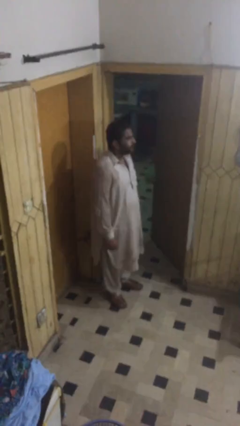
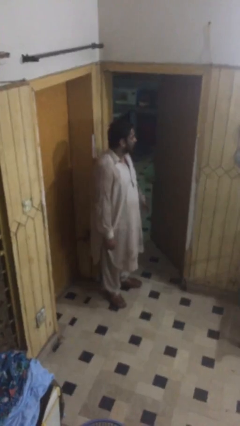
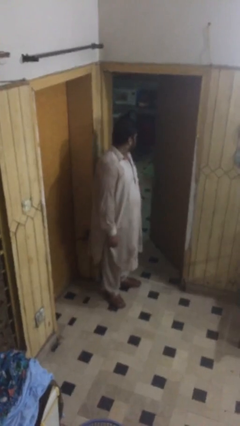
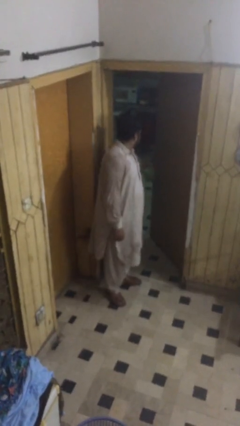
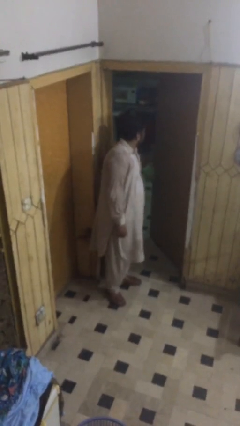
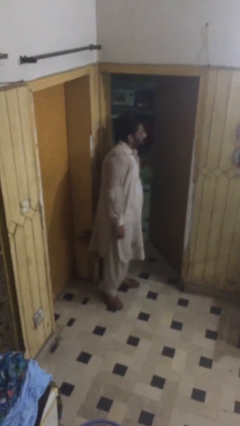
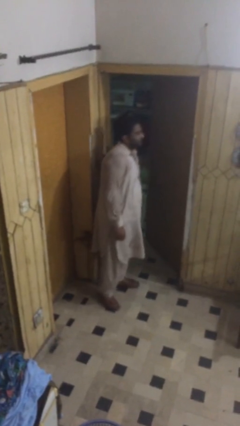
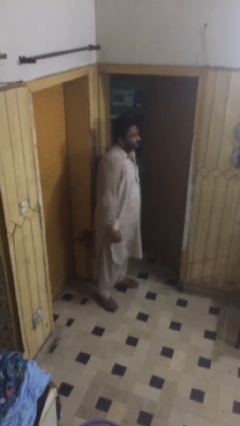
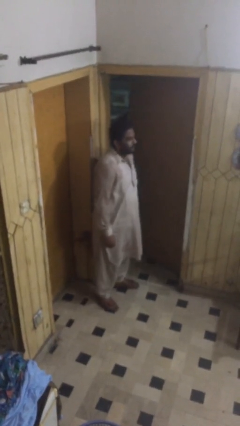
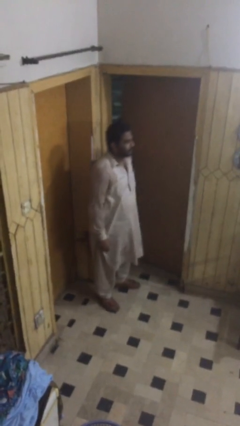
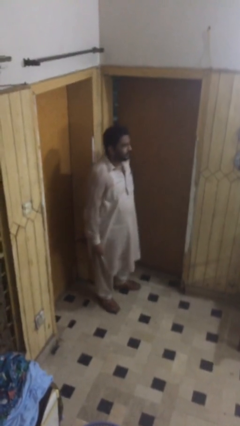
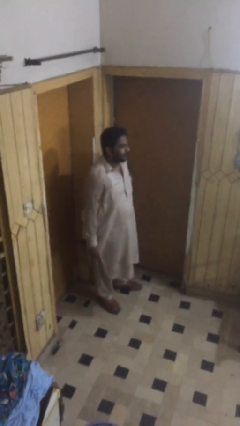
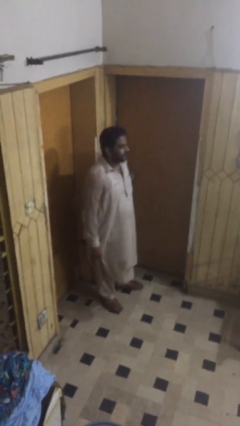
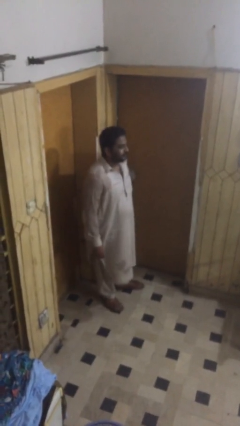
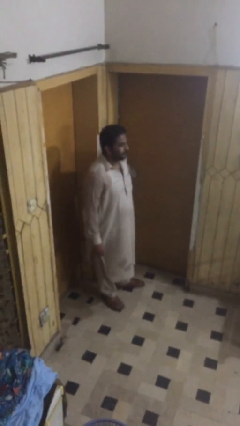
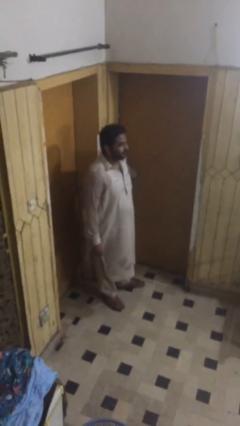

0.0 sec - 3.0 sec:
person closes facility door

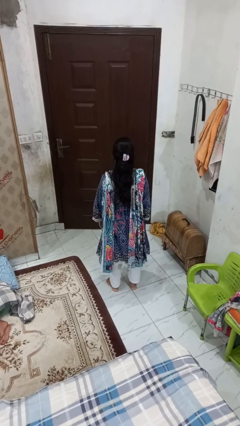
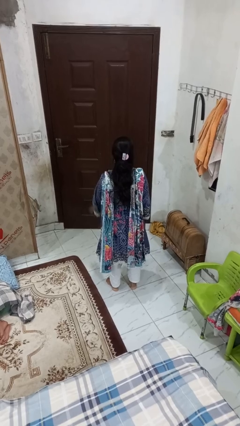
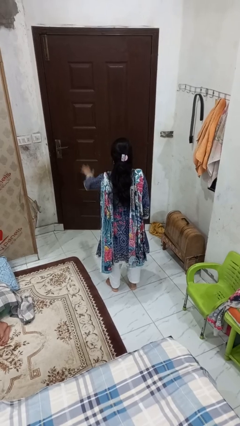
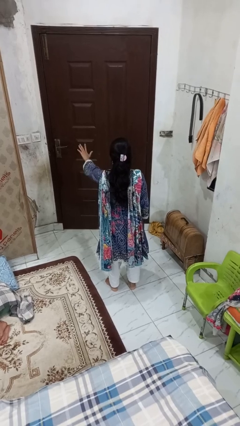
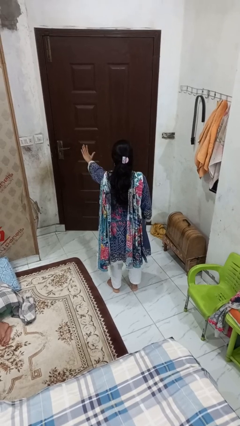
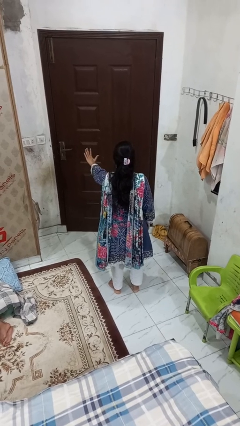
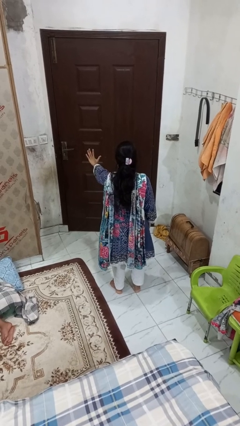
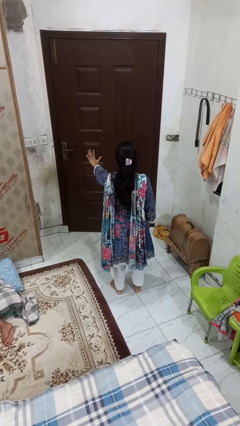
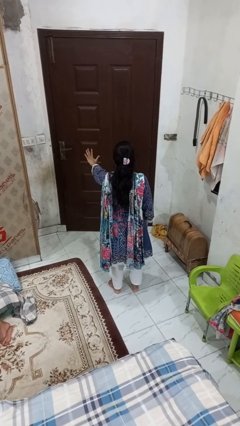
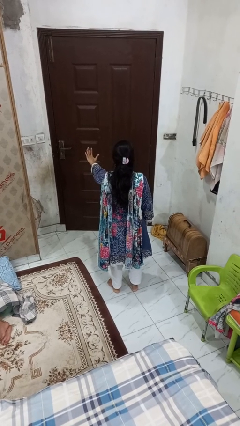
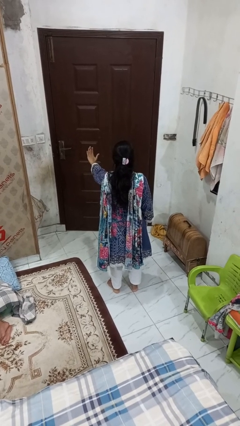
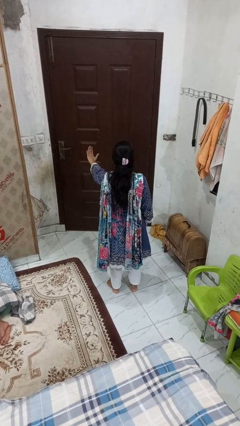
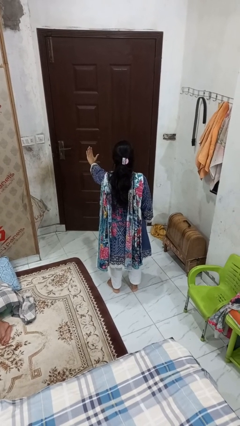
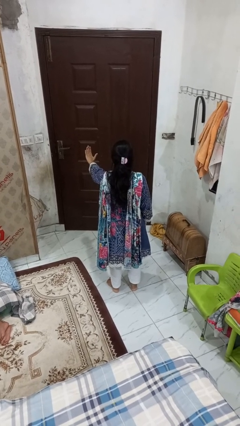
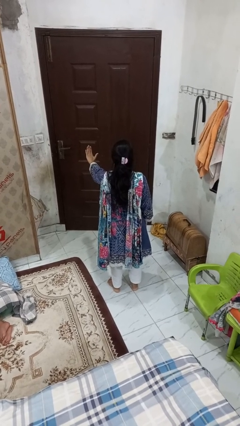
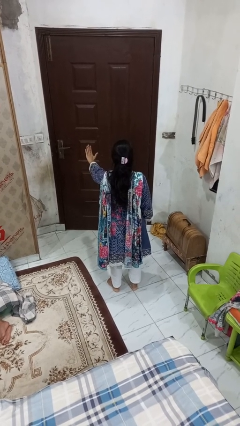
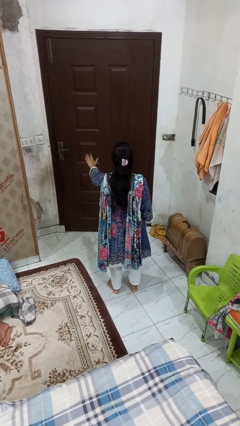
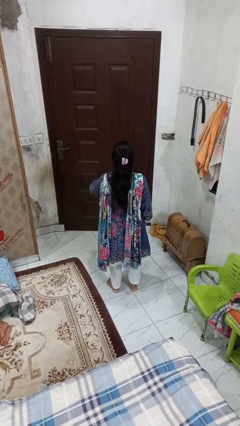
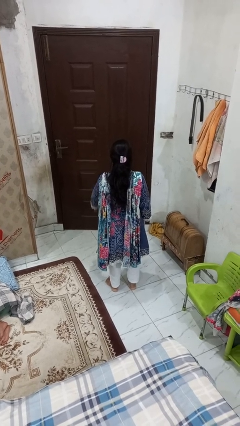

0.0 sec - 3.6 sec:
person gestures stop

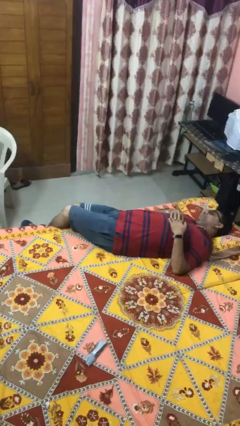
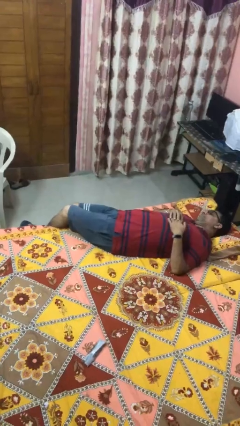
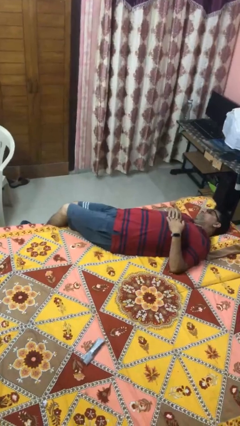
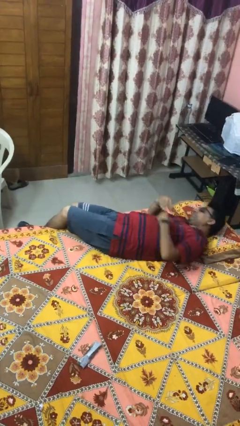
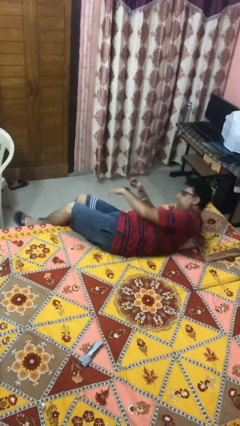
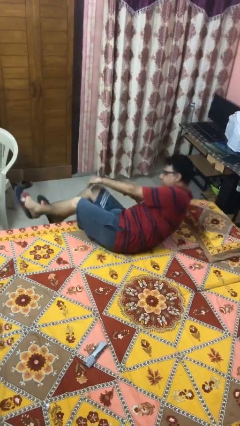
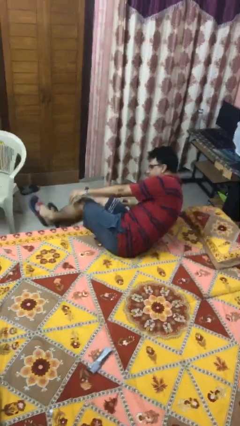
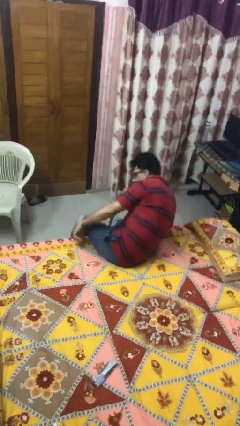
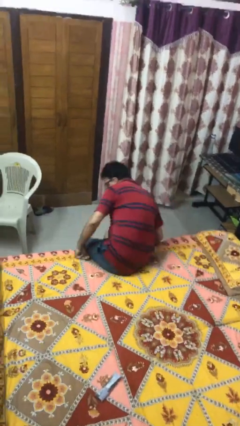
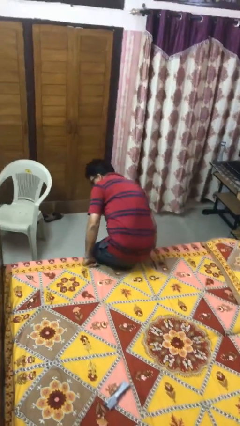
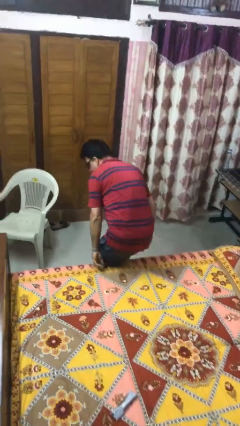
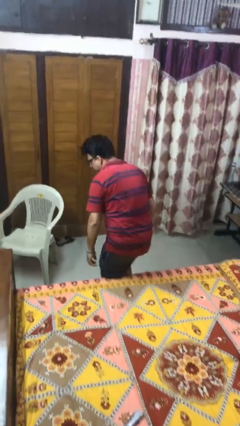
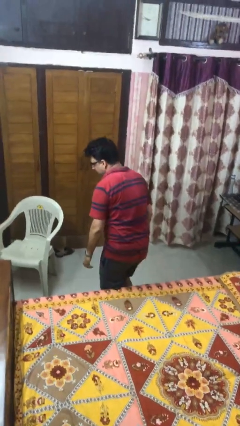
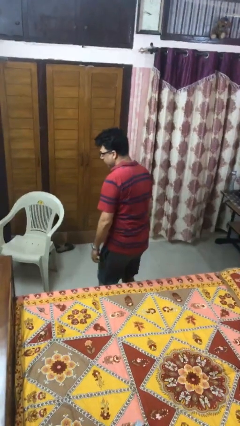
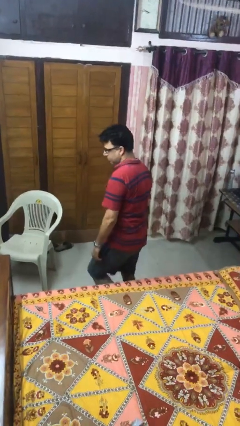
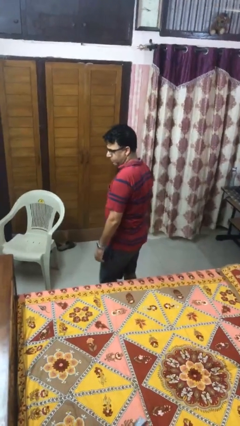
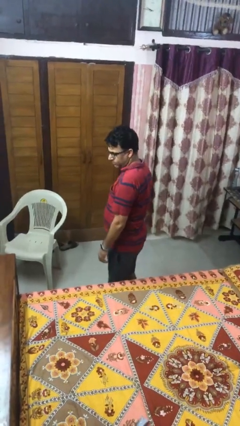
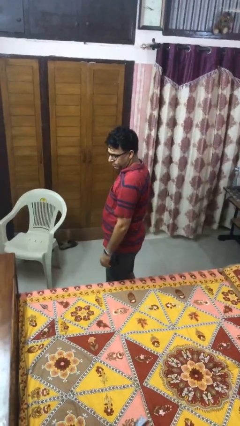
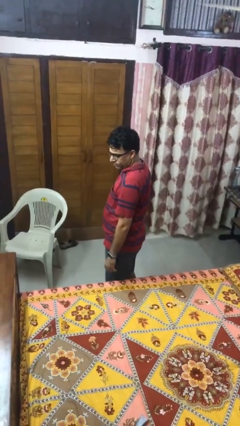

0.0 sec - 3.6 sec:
person stands up

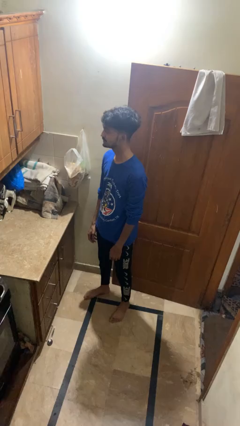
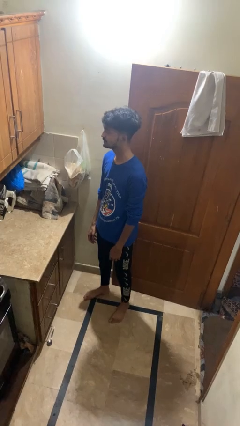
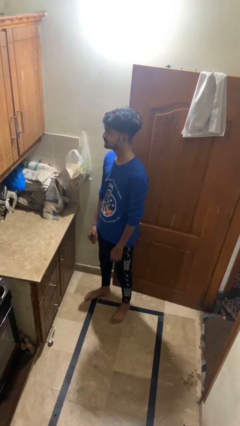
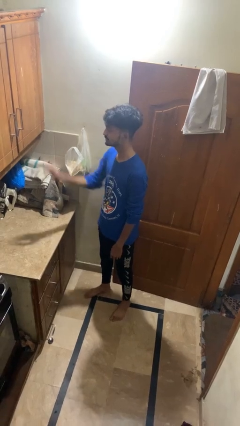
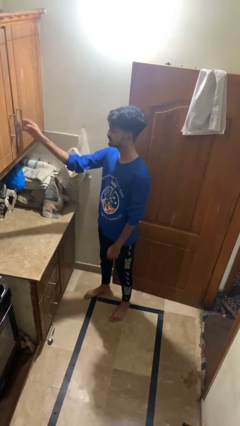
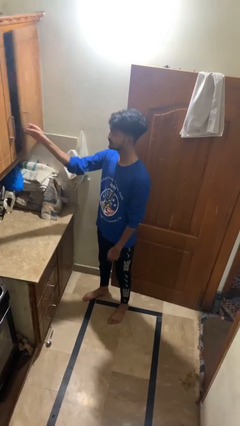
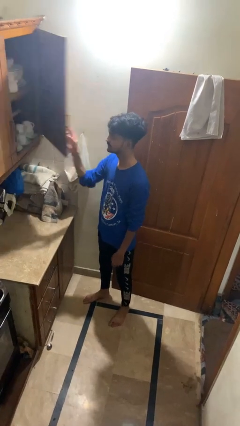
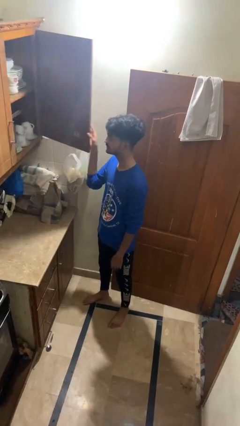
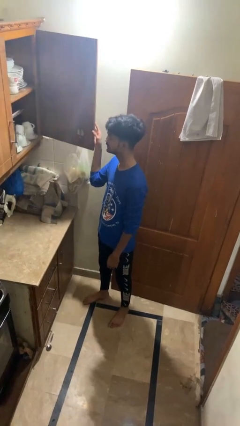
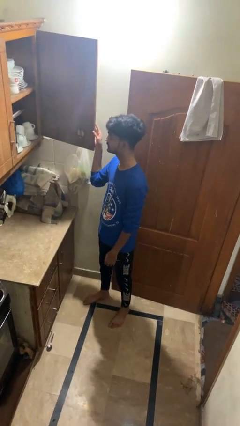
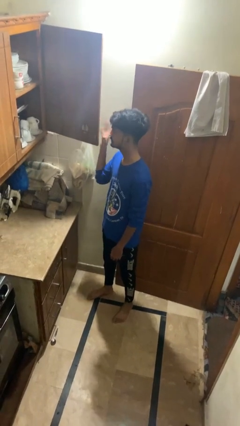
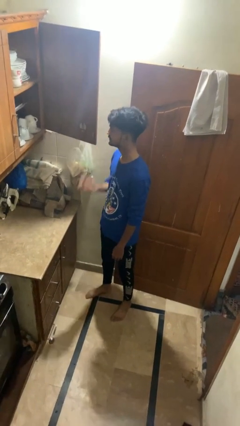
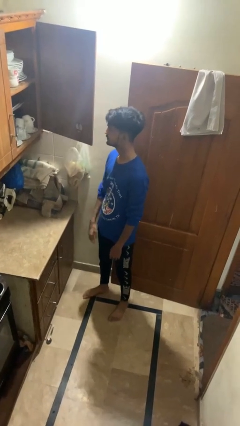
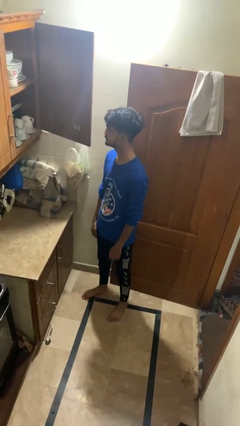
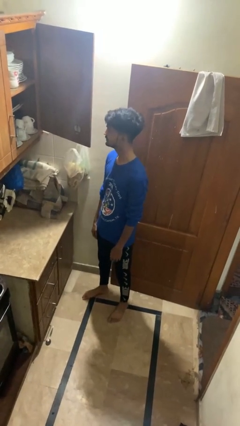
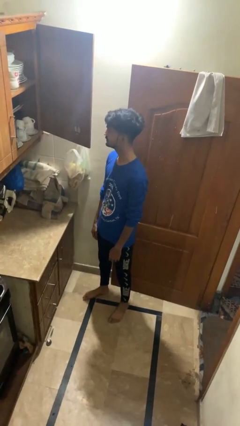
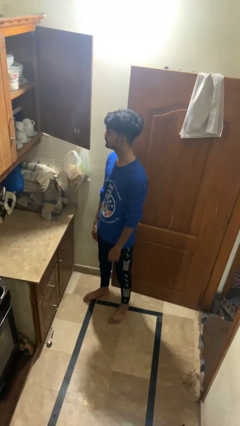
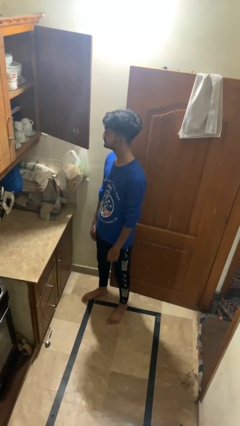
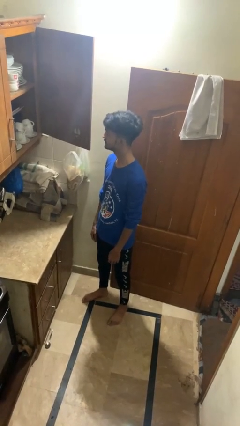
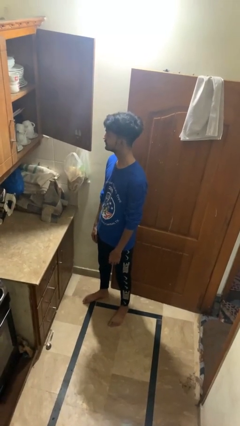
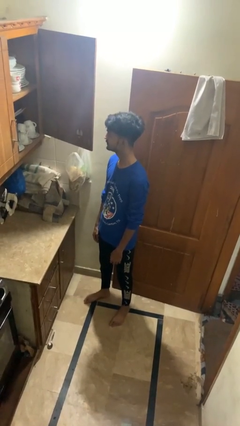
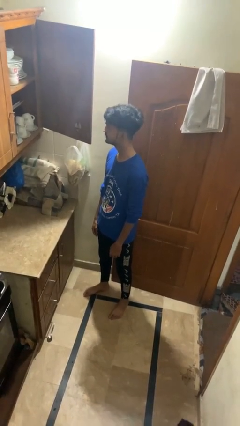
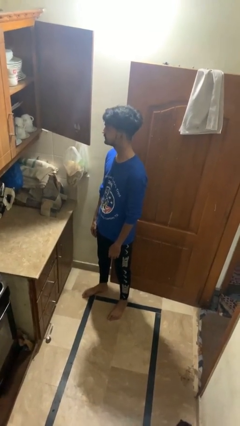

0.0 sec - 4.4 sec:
person opens cabinet

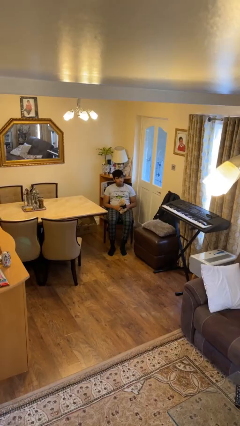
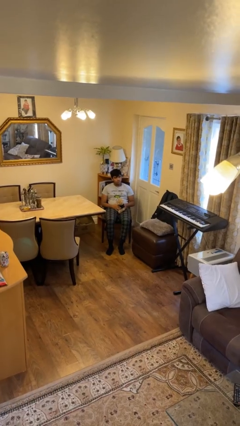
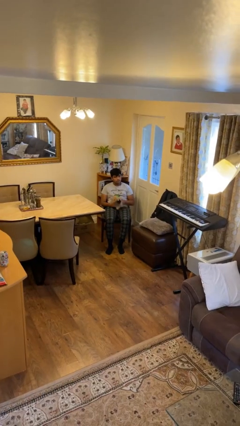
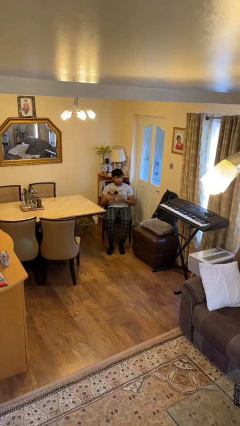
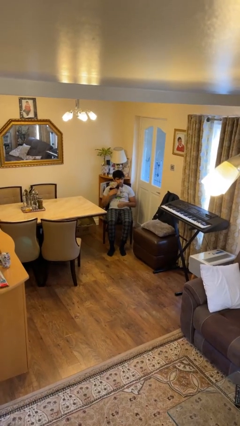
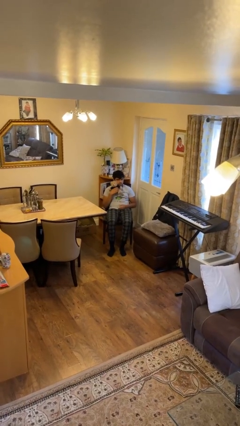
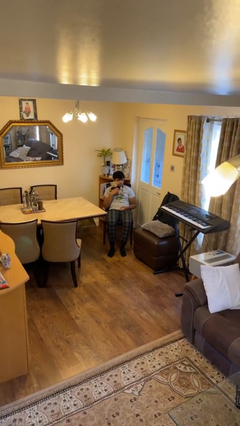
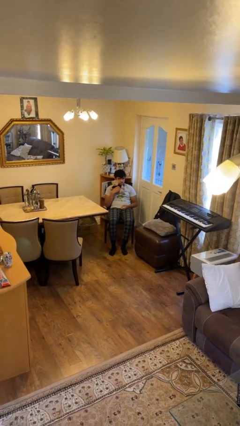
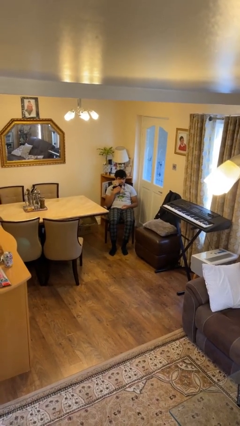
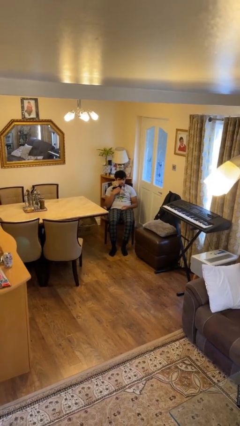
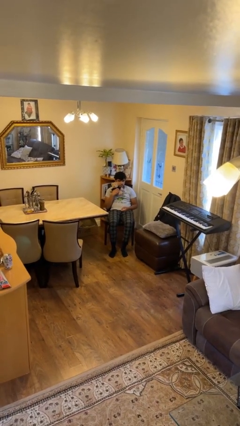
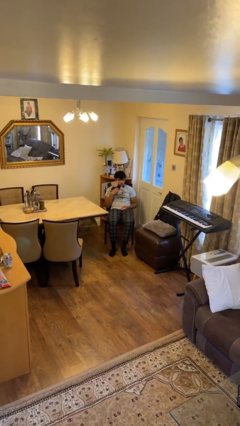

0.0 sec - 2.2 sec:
person hugs stuffed animal

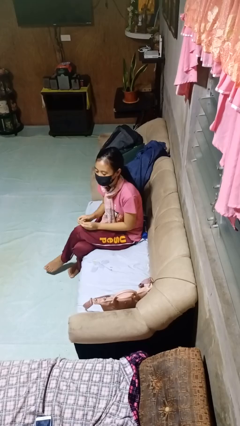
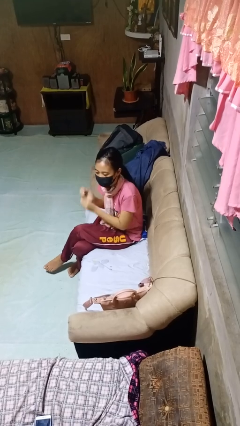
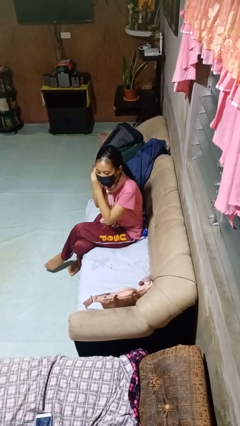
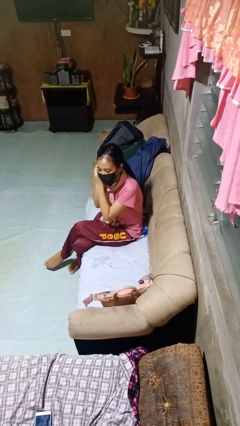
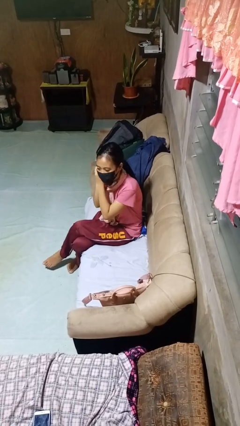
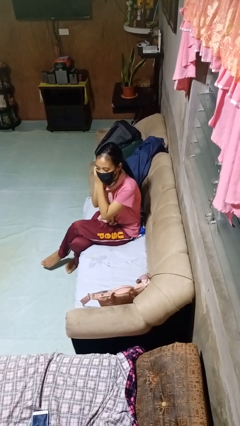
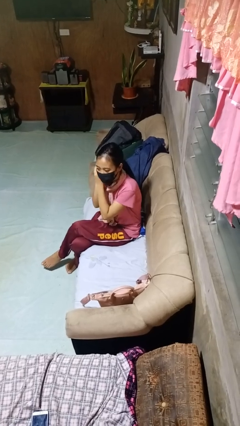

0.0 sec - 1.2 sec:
person takes off earrings
